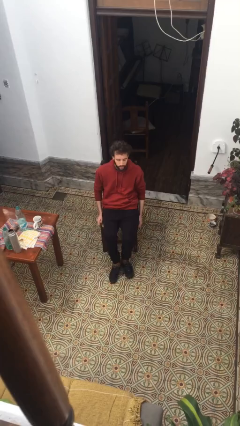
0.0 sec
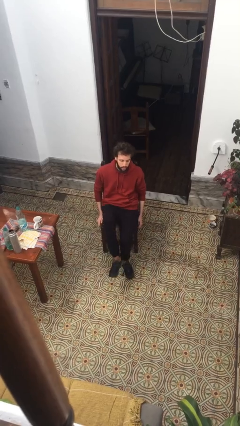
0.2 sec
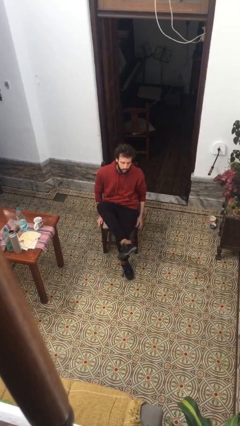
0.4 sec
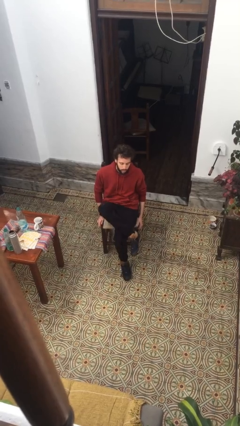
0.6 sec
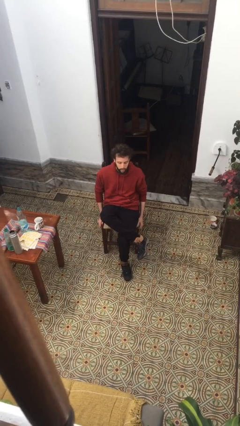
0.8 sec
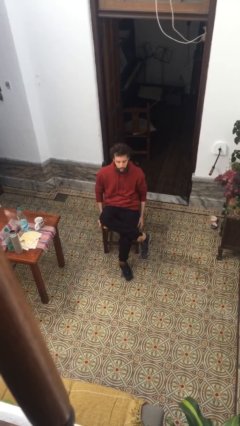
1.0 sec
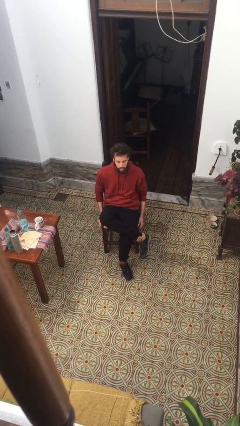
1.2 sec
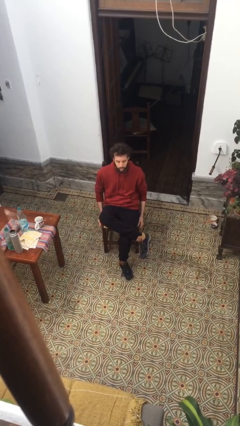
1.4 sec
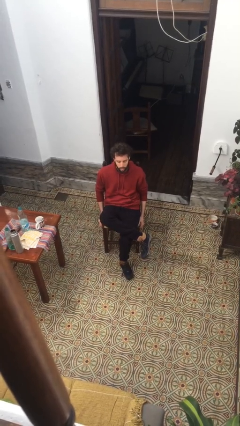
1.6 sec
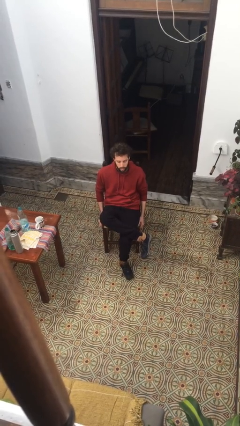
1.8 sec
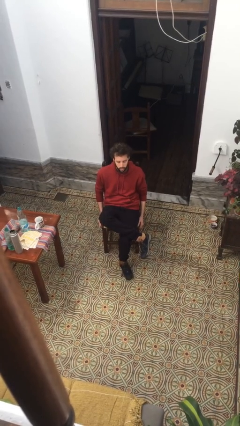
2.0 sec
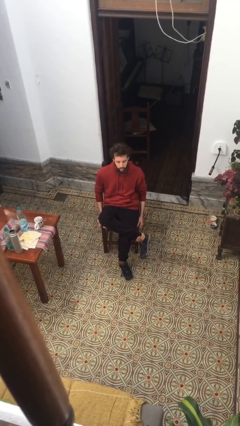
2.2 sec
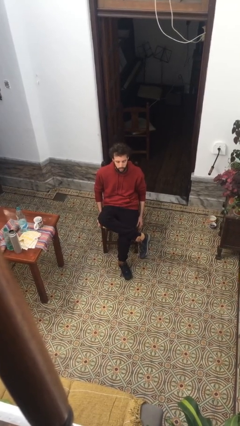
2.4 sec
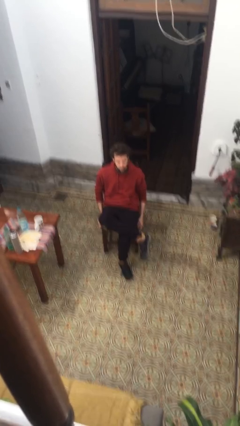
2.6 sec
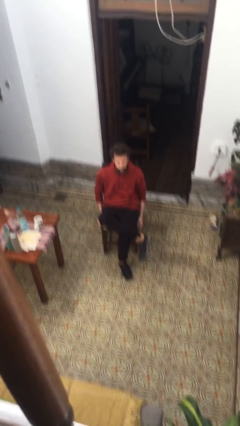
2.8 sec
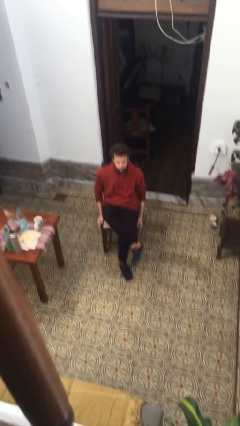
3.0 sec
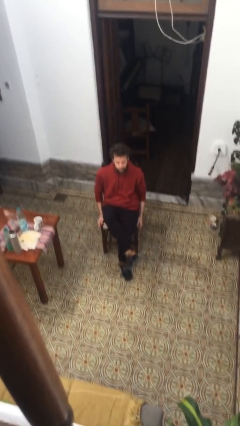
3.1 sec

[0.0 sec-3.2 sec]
person crosses legs

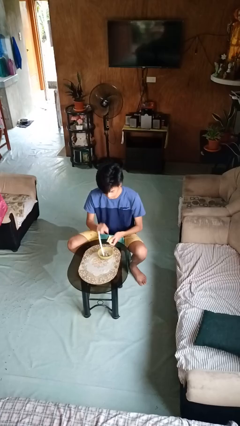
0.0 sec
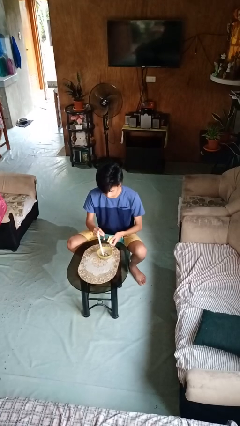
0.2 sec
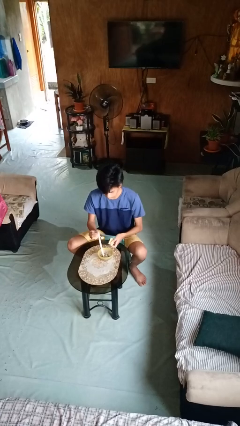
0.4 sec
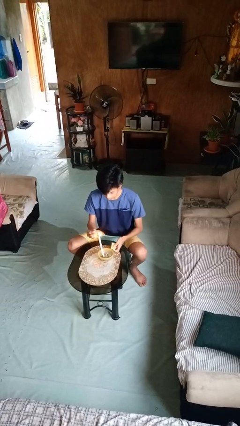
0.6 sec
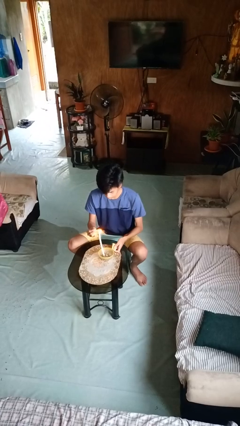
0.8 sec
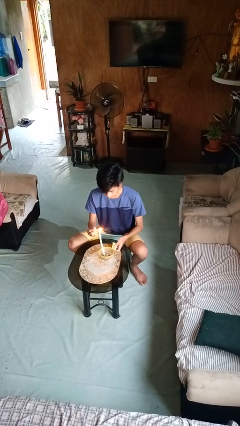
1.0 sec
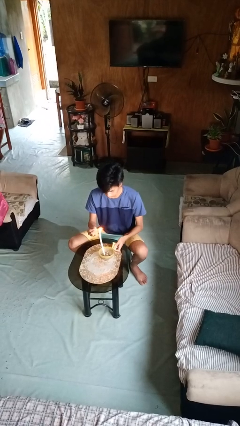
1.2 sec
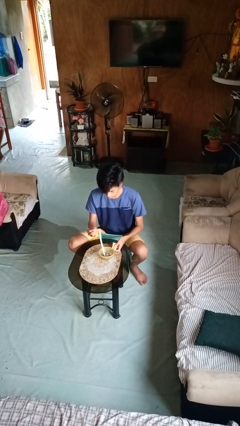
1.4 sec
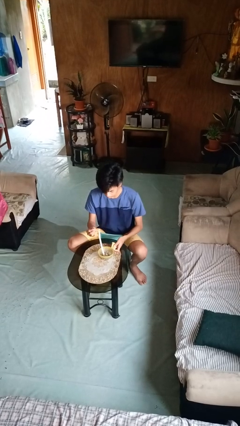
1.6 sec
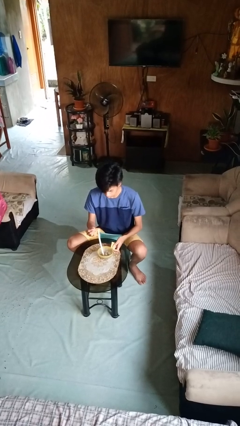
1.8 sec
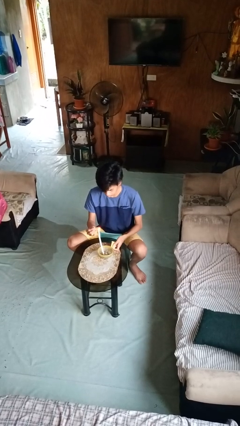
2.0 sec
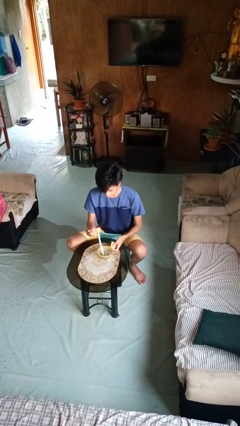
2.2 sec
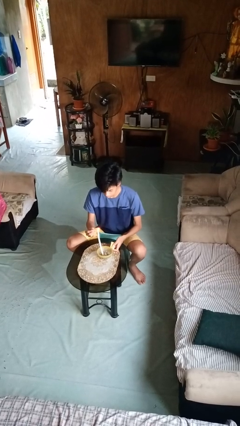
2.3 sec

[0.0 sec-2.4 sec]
person lights candle

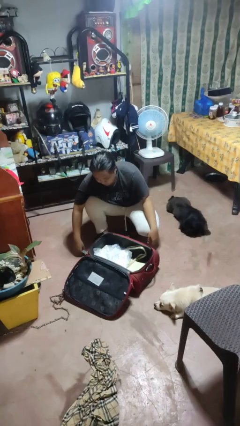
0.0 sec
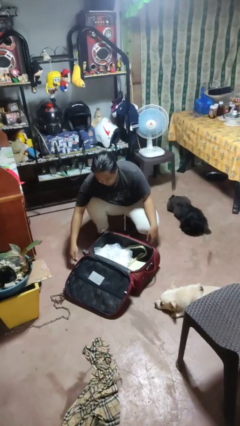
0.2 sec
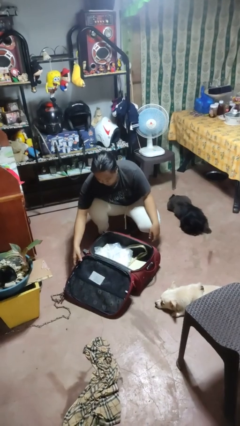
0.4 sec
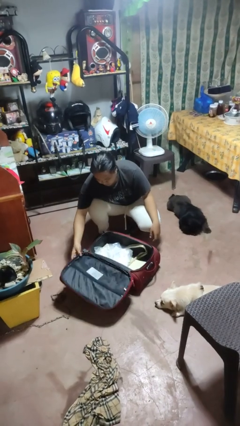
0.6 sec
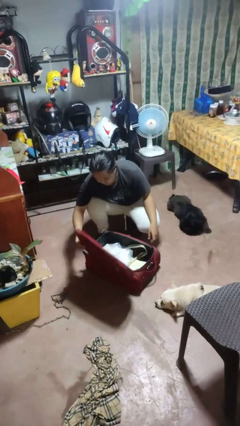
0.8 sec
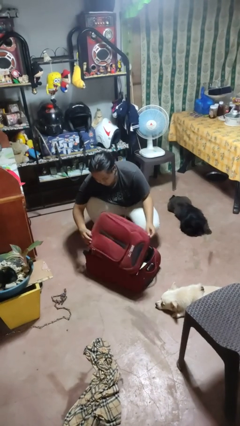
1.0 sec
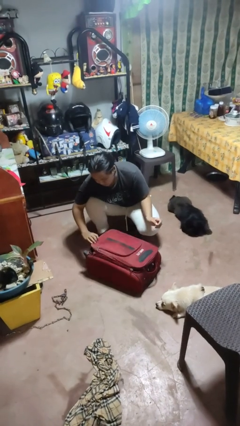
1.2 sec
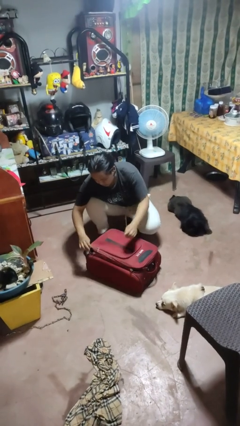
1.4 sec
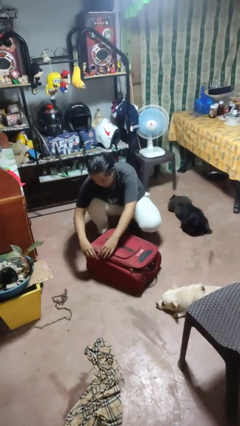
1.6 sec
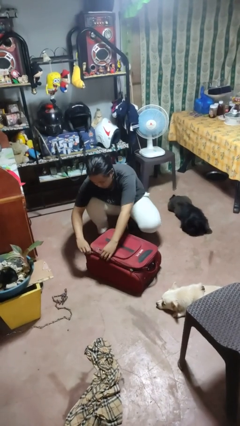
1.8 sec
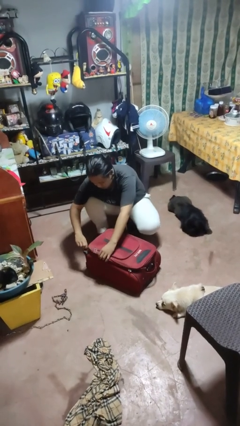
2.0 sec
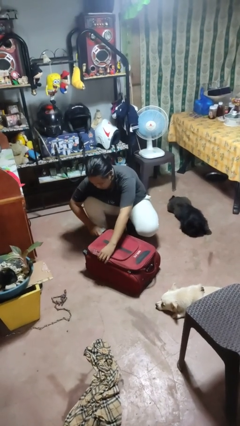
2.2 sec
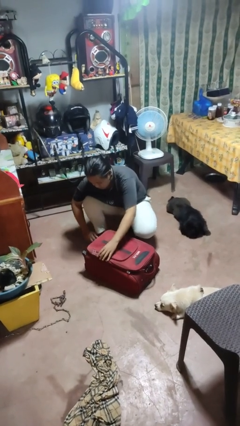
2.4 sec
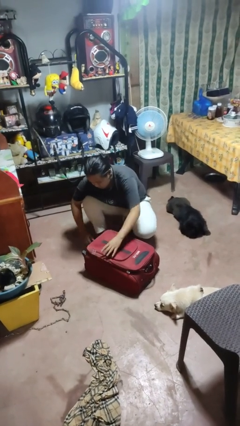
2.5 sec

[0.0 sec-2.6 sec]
person closes suitcase

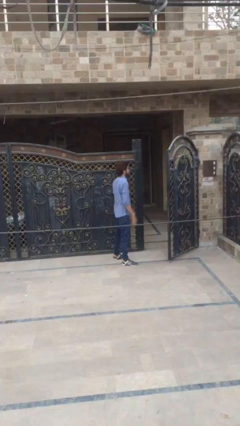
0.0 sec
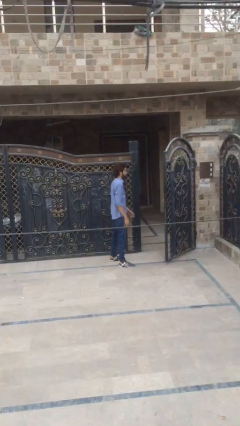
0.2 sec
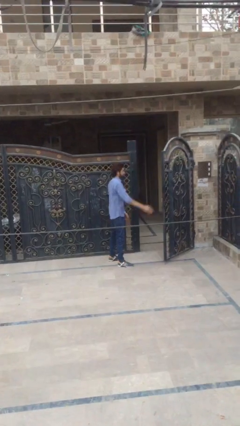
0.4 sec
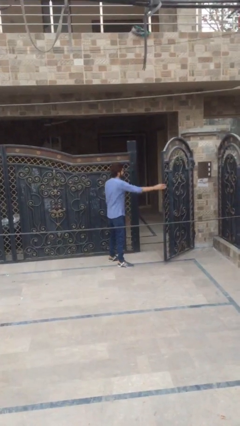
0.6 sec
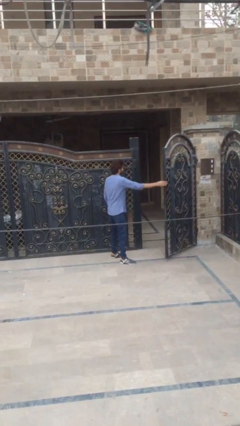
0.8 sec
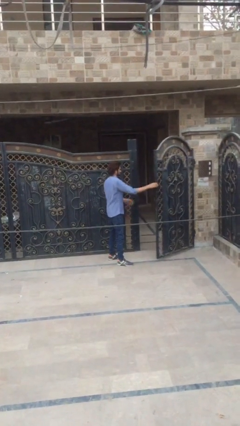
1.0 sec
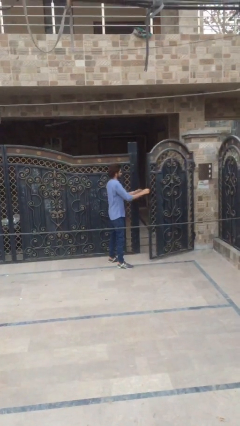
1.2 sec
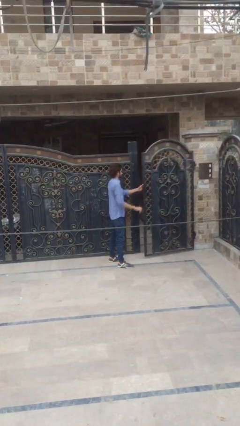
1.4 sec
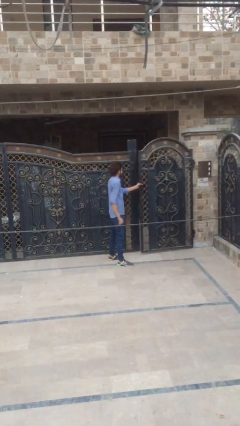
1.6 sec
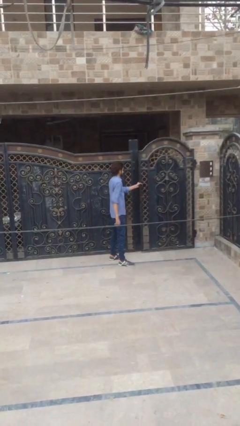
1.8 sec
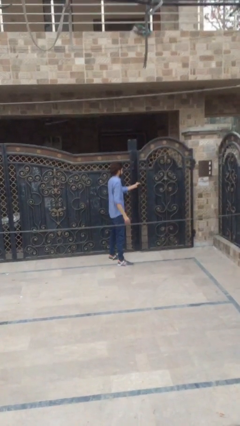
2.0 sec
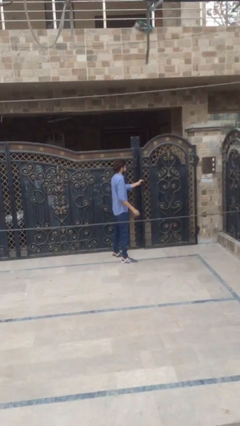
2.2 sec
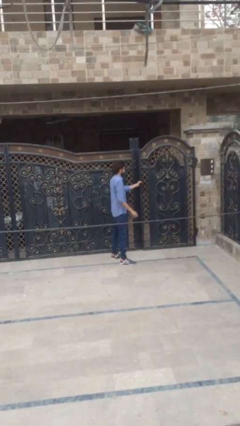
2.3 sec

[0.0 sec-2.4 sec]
person closes facility door

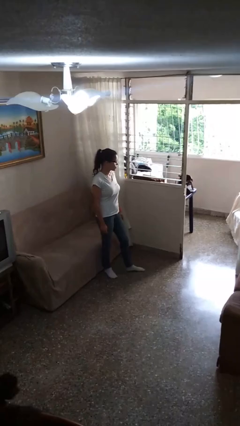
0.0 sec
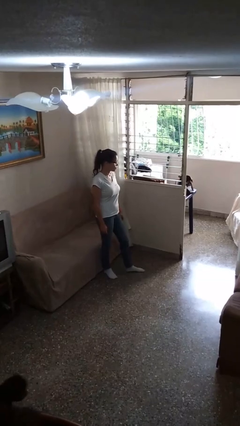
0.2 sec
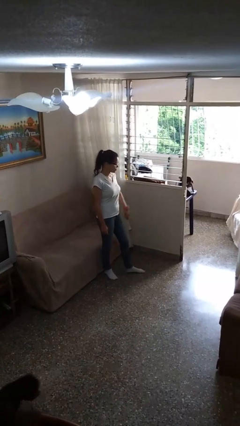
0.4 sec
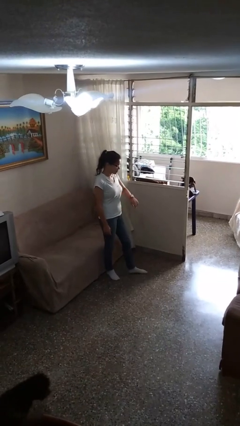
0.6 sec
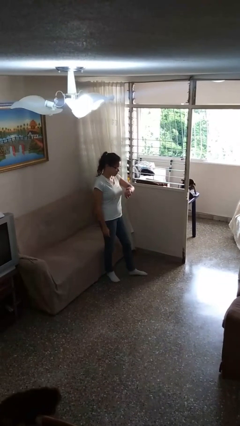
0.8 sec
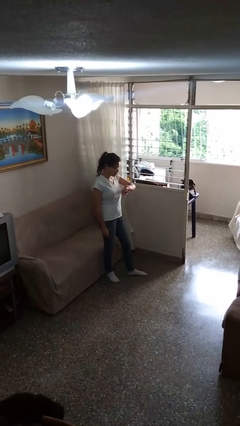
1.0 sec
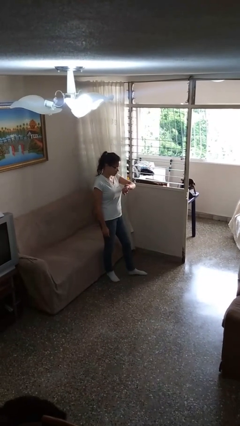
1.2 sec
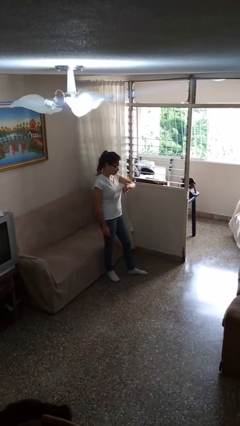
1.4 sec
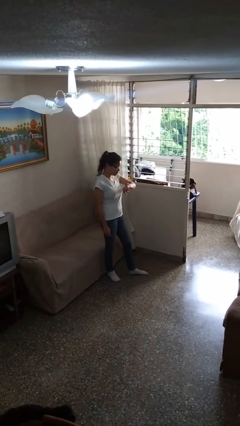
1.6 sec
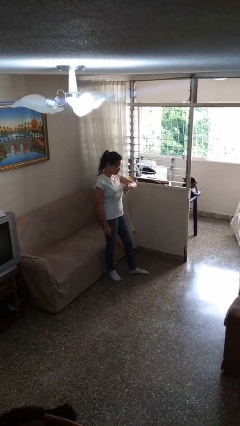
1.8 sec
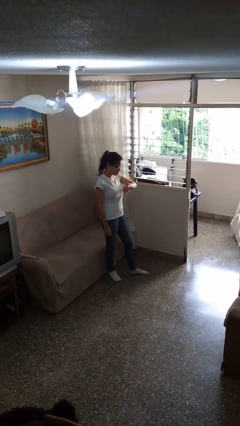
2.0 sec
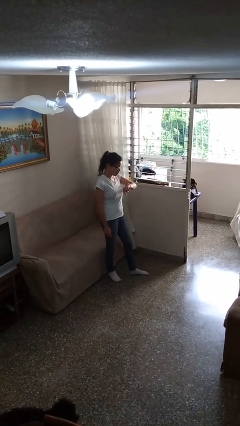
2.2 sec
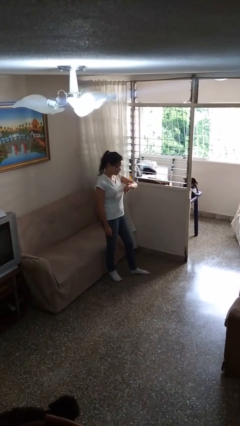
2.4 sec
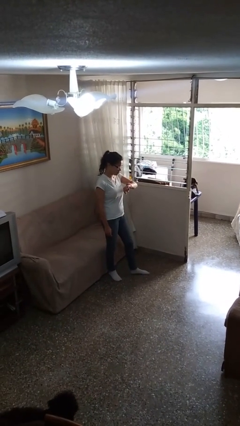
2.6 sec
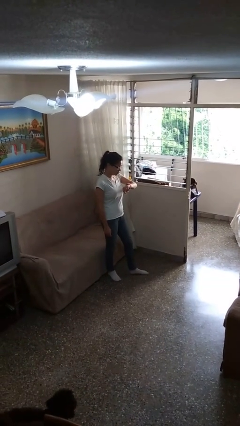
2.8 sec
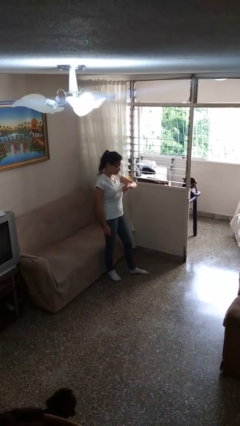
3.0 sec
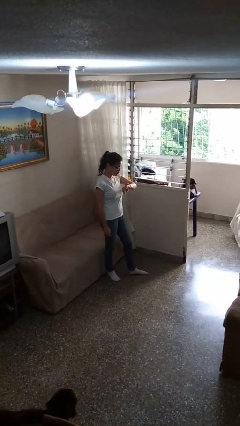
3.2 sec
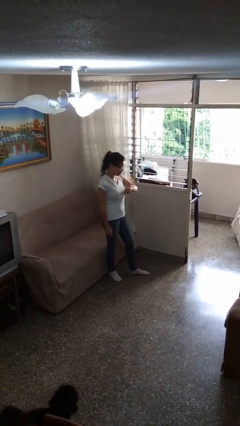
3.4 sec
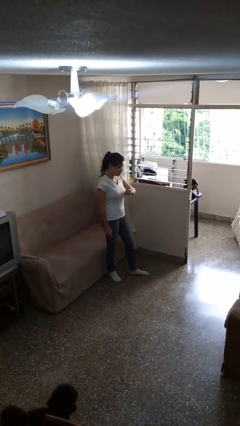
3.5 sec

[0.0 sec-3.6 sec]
person looks at wristwatch

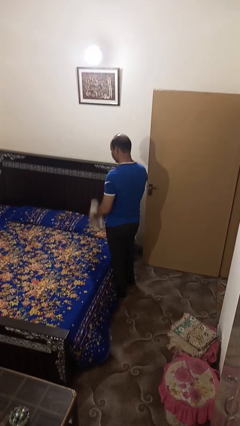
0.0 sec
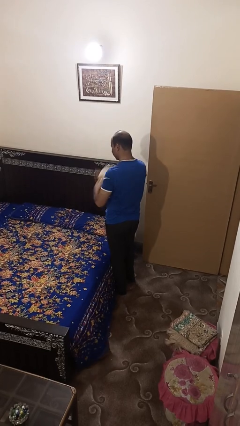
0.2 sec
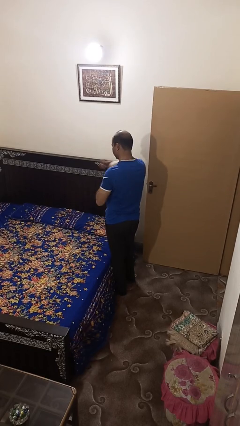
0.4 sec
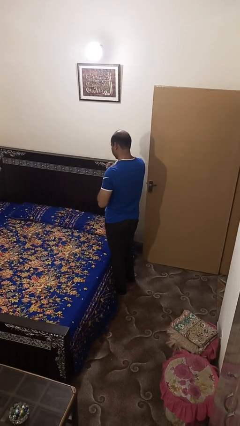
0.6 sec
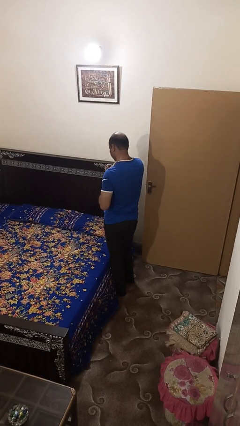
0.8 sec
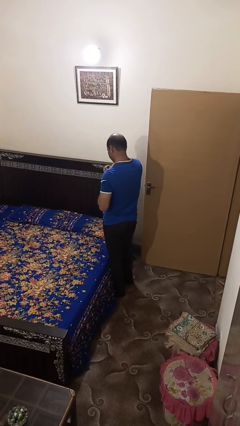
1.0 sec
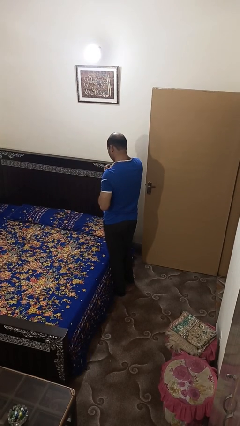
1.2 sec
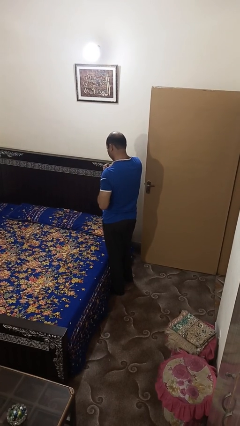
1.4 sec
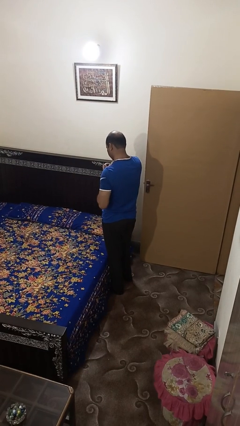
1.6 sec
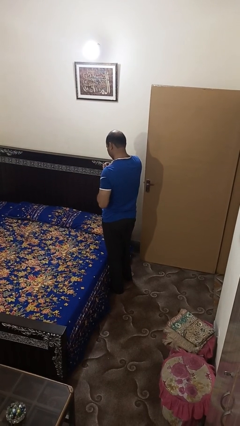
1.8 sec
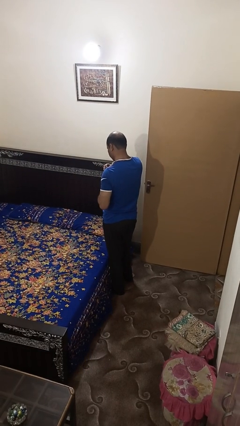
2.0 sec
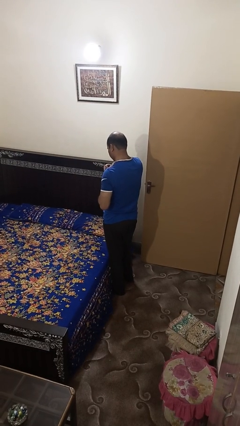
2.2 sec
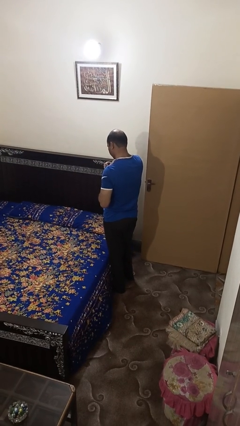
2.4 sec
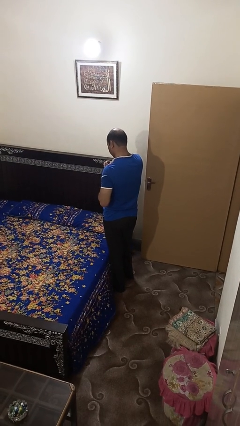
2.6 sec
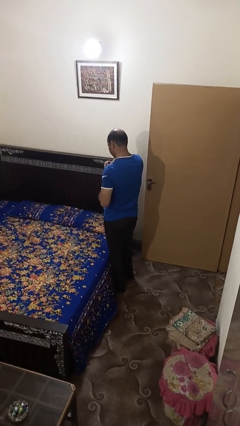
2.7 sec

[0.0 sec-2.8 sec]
person hugs stuffed animal

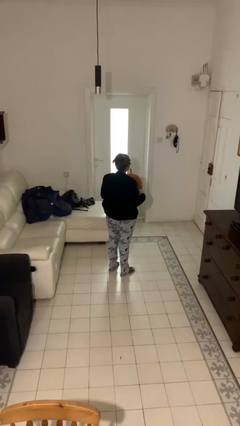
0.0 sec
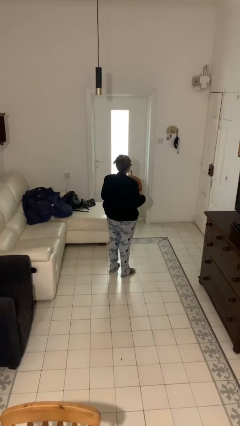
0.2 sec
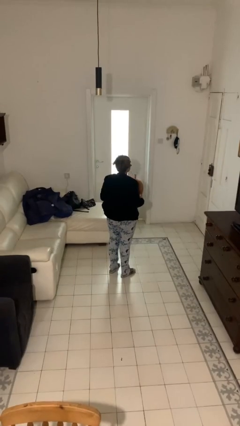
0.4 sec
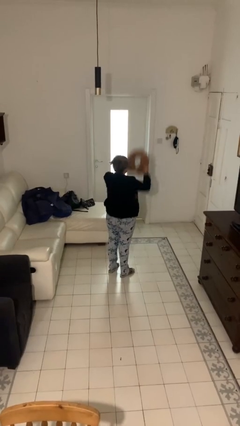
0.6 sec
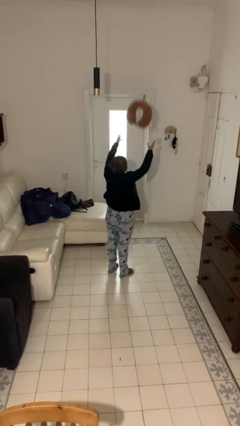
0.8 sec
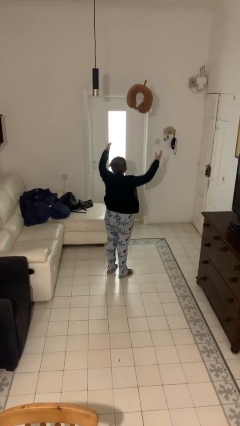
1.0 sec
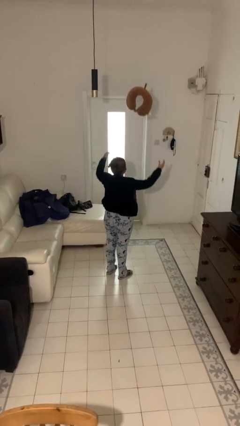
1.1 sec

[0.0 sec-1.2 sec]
person drops object
